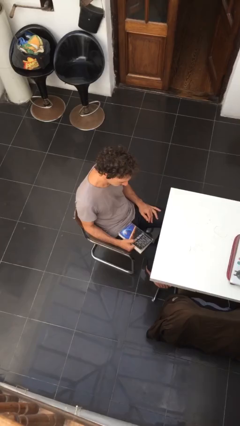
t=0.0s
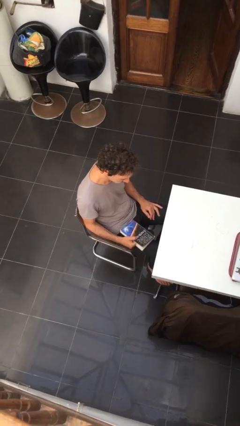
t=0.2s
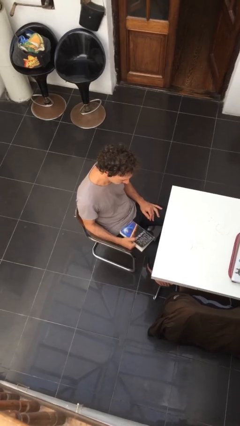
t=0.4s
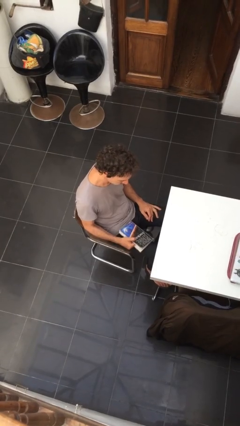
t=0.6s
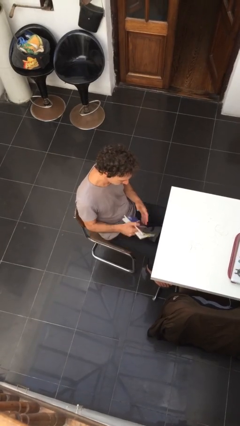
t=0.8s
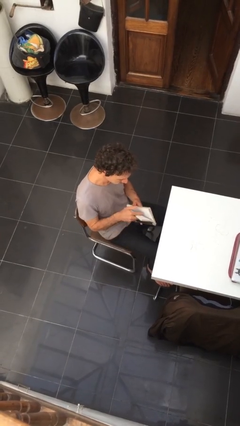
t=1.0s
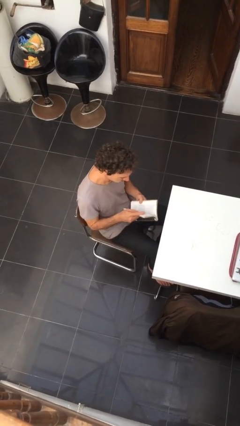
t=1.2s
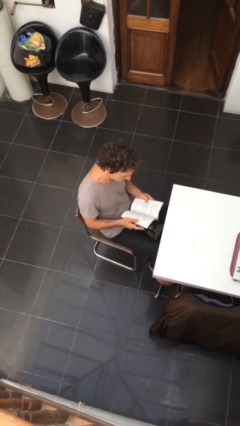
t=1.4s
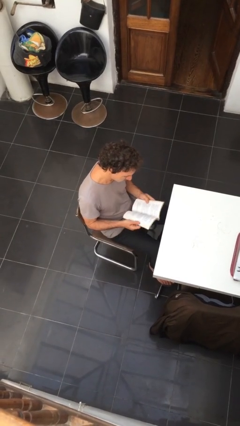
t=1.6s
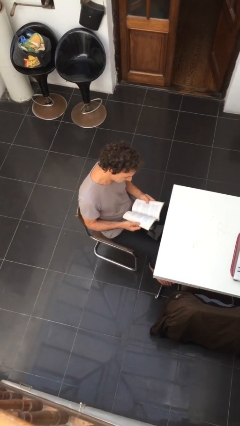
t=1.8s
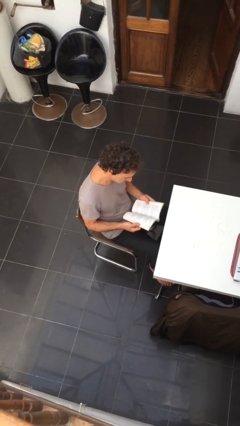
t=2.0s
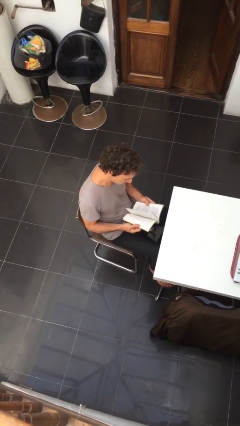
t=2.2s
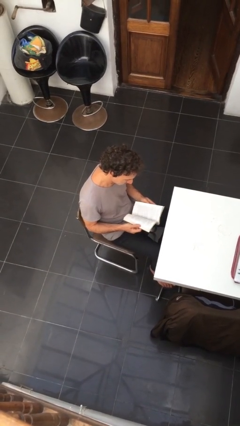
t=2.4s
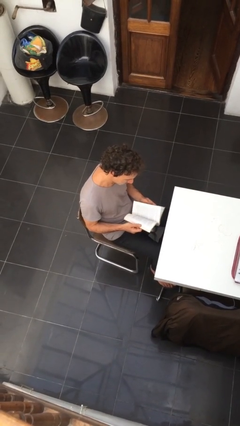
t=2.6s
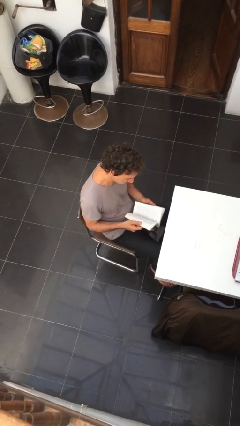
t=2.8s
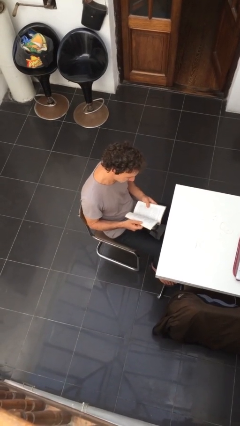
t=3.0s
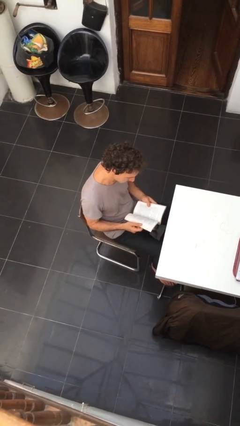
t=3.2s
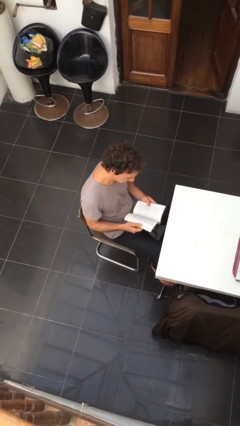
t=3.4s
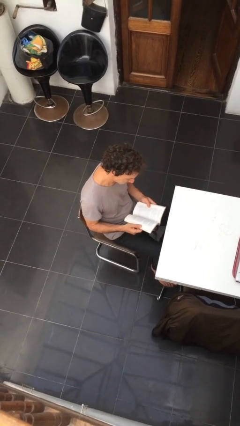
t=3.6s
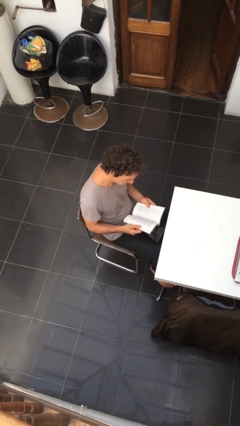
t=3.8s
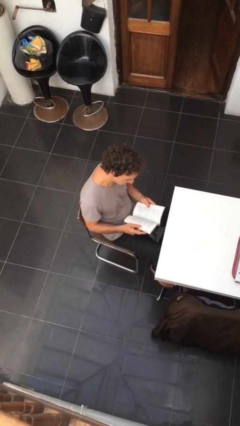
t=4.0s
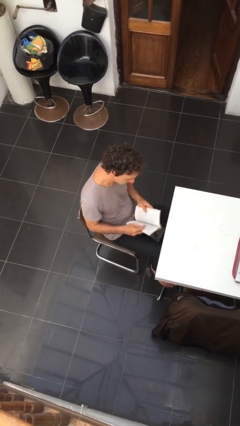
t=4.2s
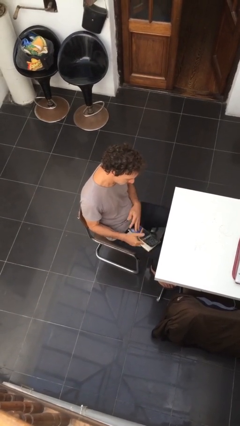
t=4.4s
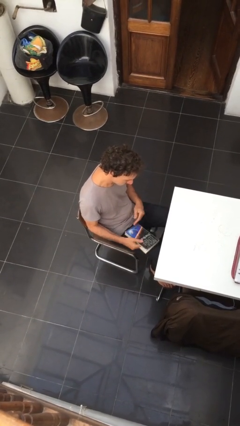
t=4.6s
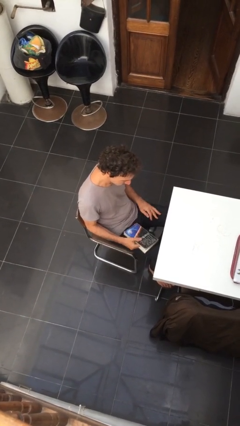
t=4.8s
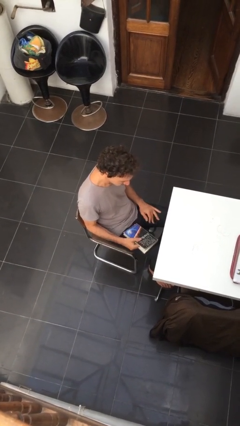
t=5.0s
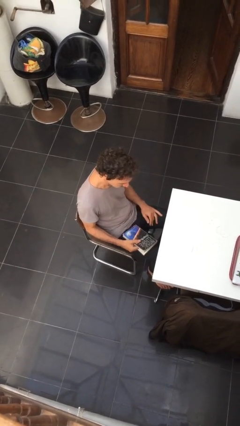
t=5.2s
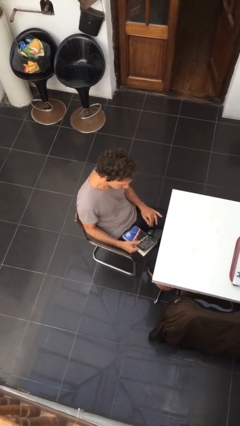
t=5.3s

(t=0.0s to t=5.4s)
person reads document

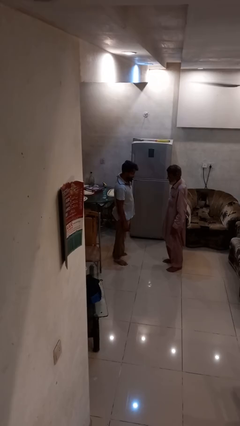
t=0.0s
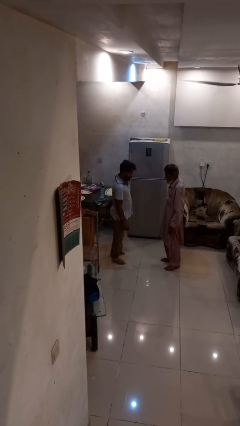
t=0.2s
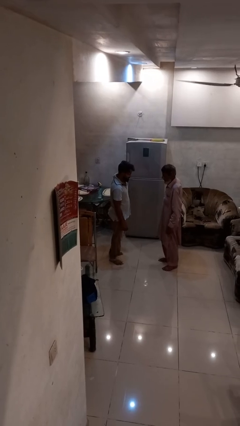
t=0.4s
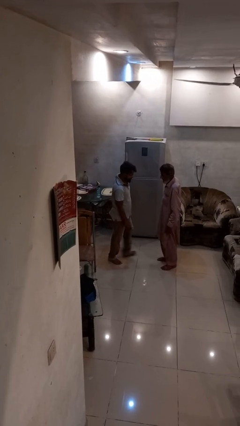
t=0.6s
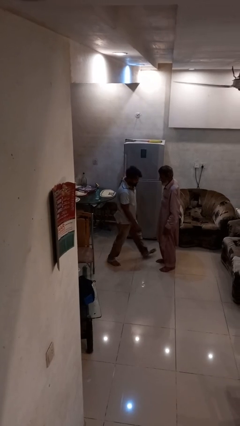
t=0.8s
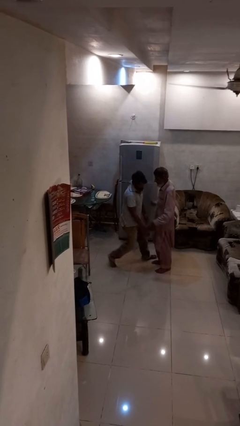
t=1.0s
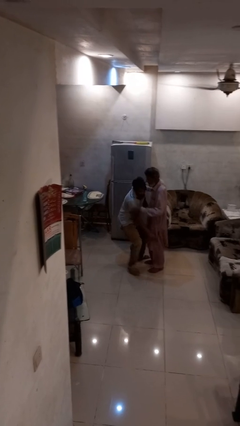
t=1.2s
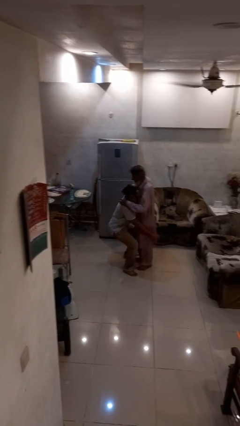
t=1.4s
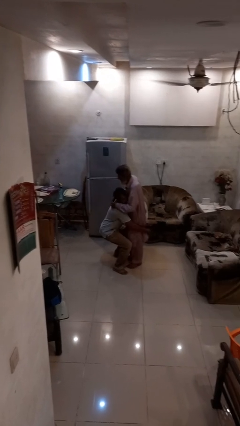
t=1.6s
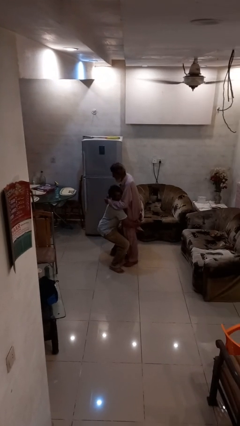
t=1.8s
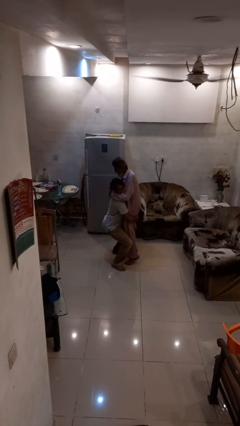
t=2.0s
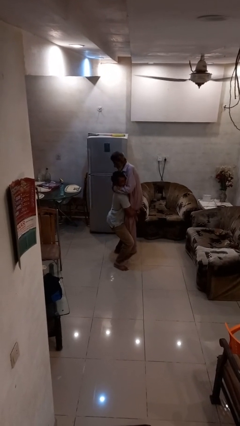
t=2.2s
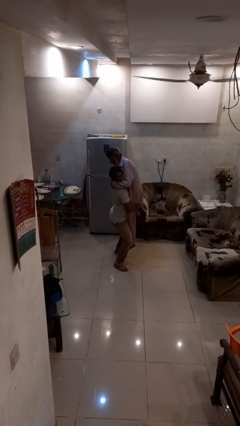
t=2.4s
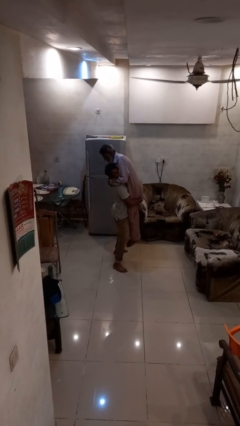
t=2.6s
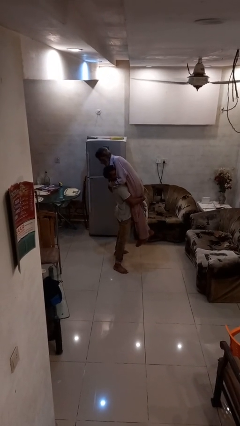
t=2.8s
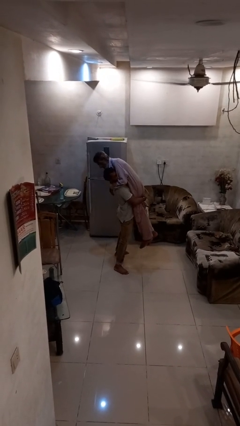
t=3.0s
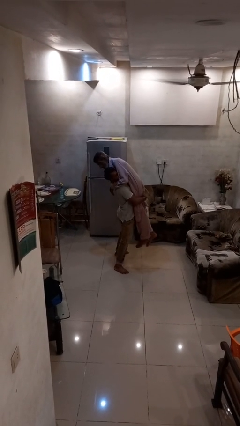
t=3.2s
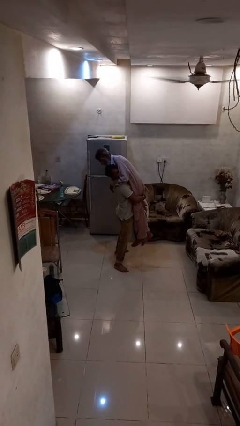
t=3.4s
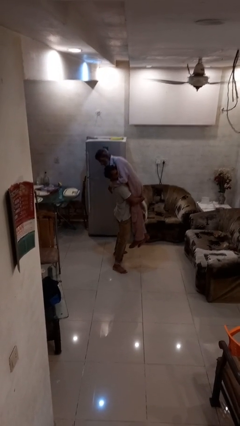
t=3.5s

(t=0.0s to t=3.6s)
person picks up person

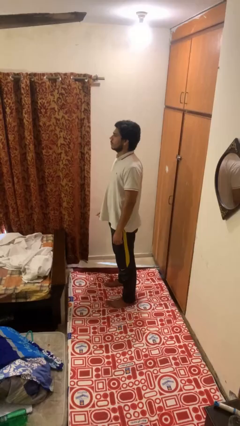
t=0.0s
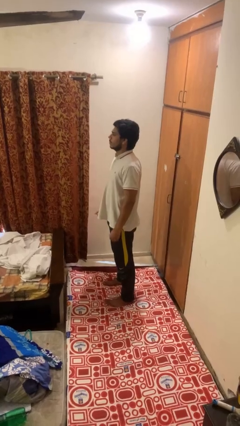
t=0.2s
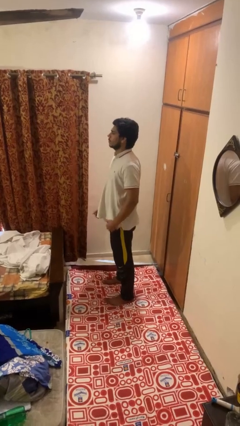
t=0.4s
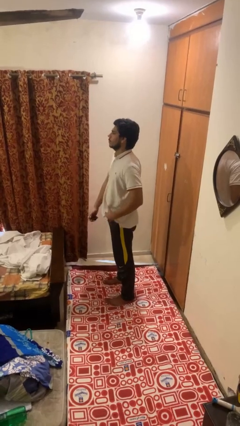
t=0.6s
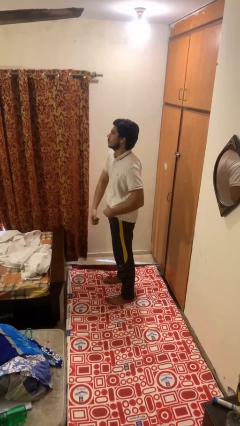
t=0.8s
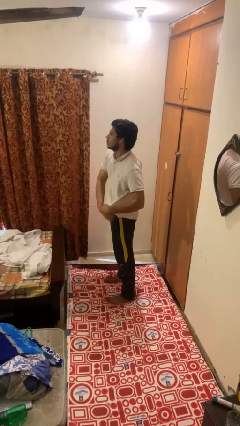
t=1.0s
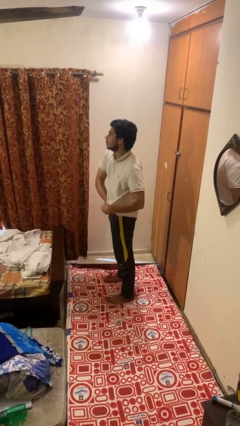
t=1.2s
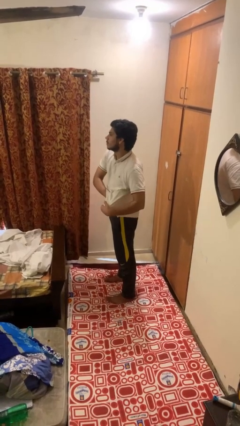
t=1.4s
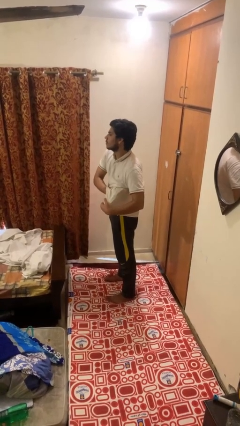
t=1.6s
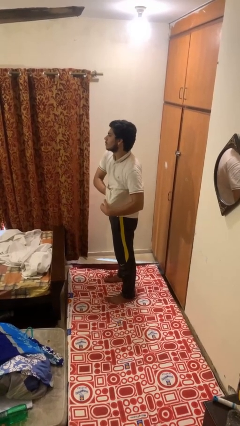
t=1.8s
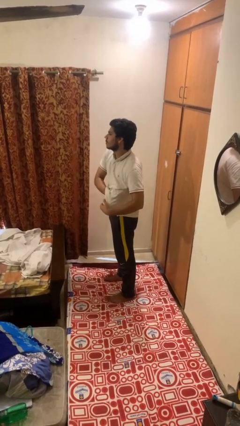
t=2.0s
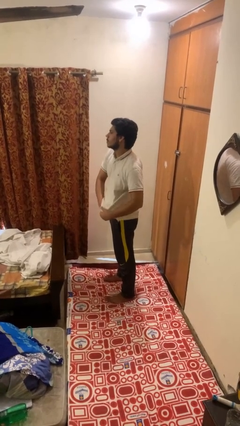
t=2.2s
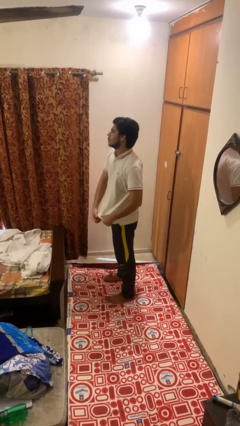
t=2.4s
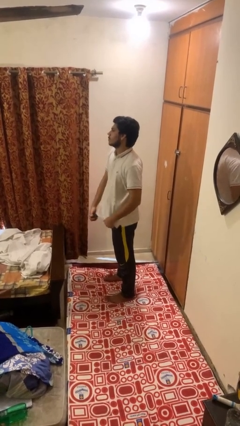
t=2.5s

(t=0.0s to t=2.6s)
person applies deodorant

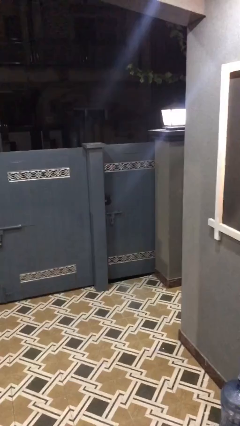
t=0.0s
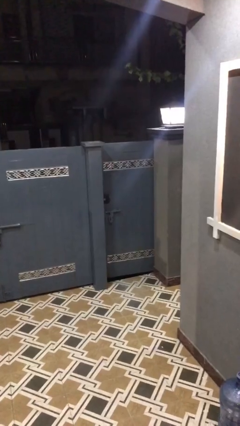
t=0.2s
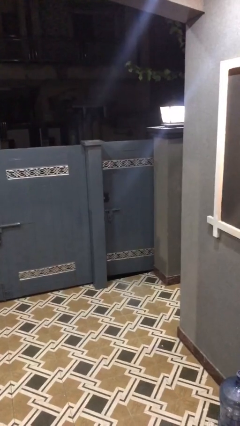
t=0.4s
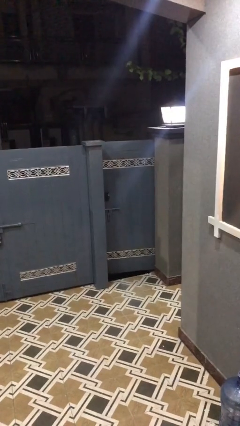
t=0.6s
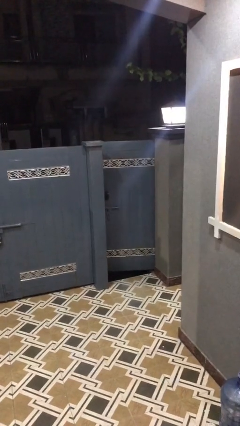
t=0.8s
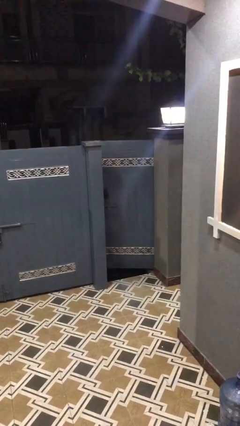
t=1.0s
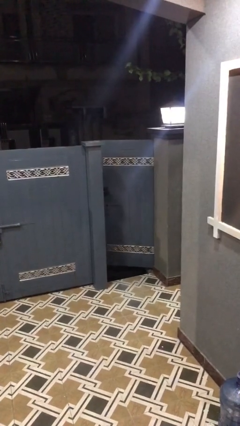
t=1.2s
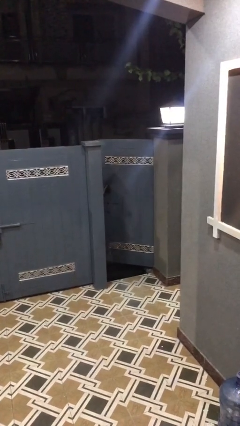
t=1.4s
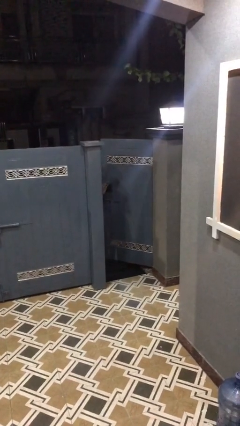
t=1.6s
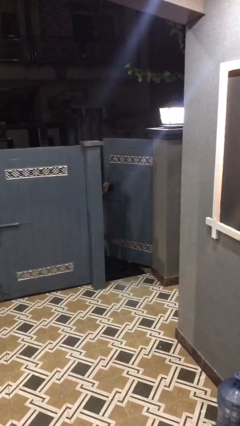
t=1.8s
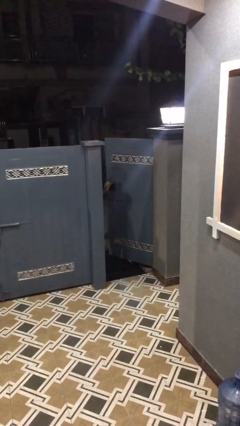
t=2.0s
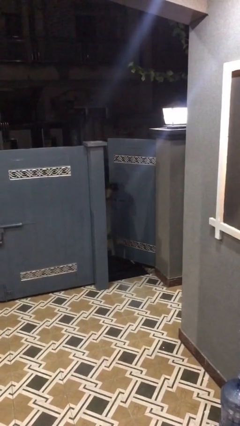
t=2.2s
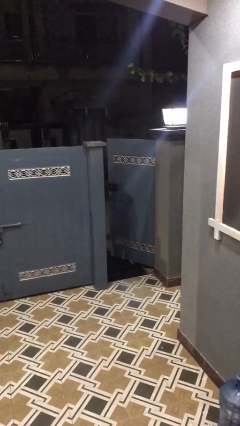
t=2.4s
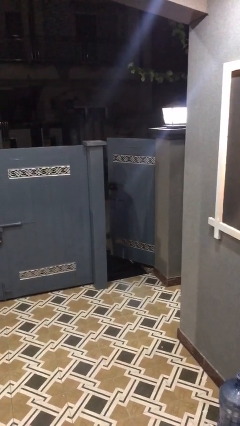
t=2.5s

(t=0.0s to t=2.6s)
person opens facility door

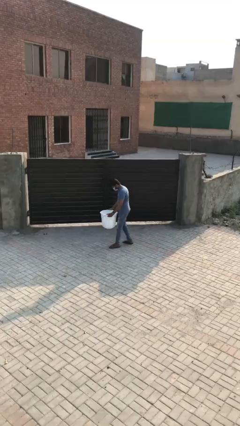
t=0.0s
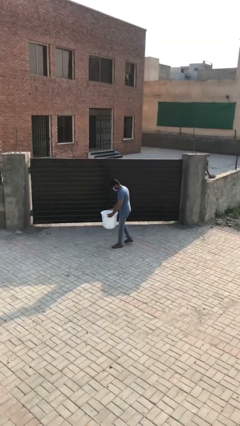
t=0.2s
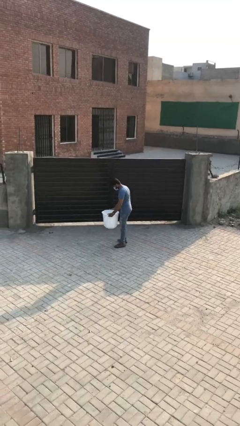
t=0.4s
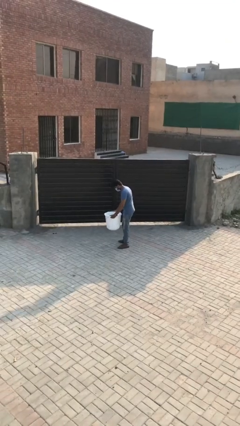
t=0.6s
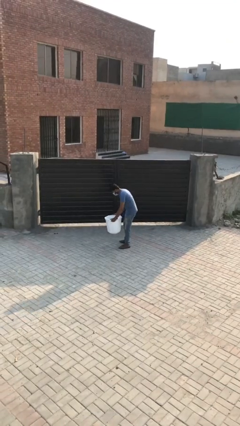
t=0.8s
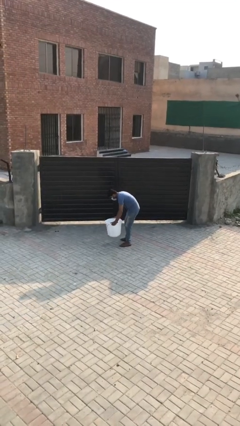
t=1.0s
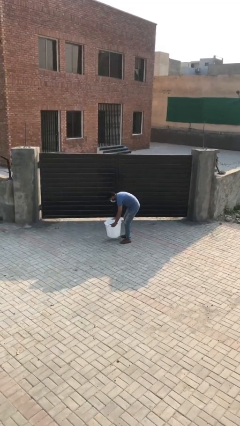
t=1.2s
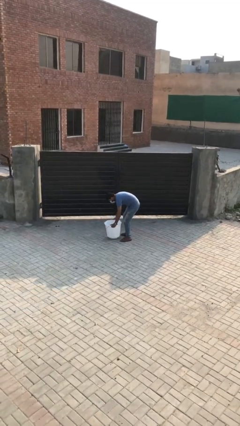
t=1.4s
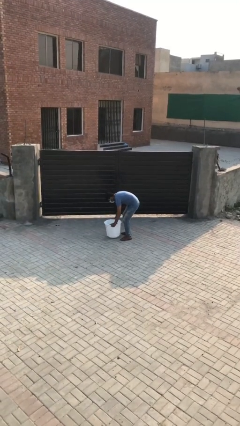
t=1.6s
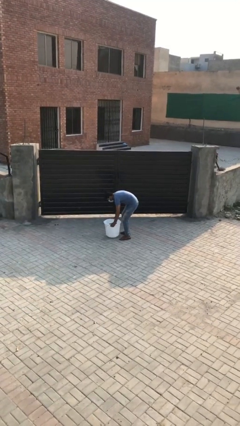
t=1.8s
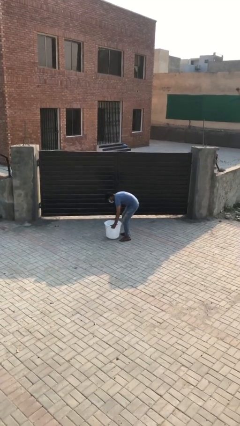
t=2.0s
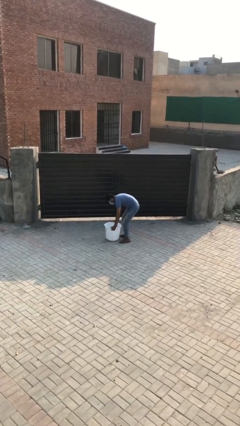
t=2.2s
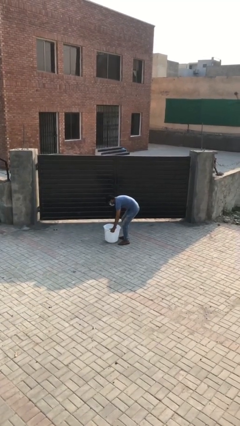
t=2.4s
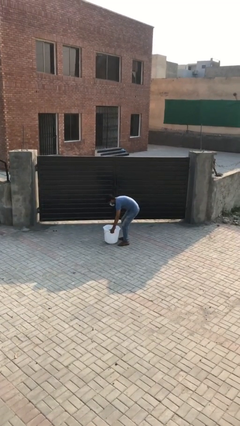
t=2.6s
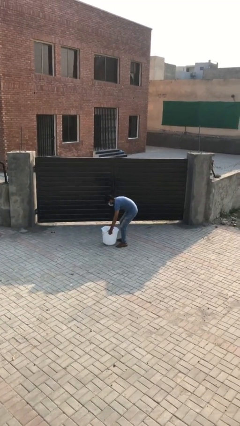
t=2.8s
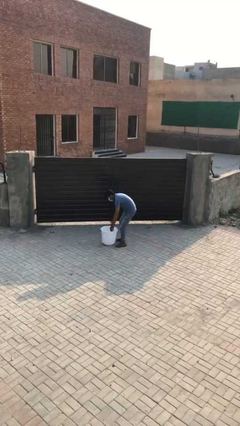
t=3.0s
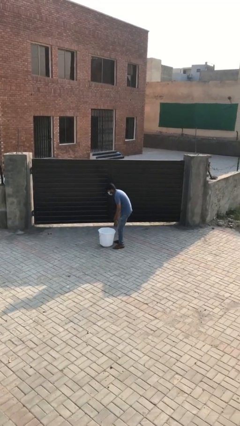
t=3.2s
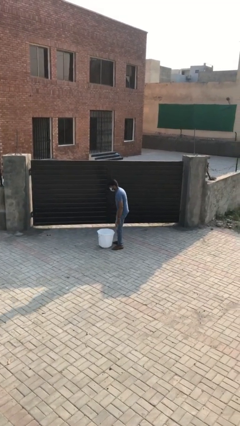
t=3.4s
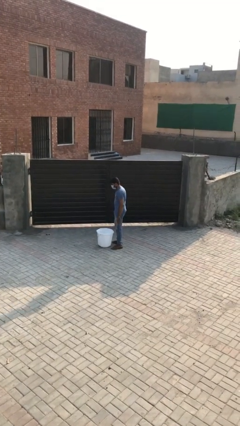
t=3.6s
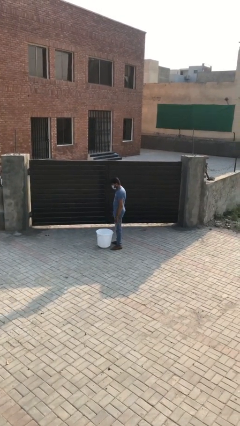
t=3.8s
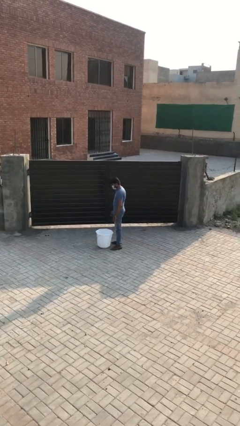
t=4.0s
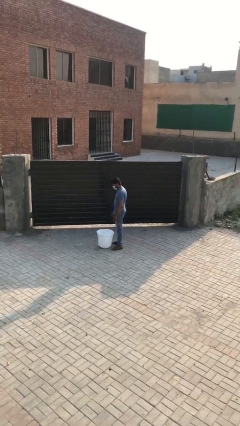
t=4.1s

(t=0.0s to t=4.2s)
person puts down object on floor
